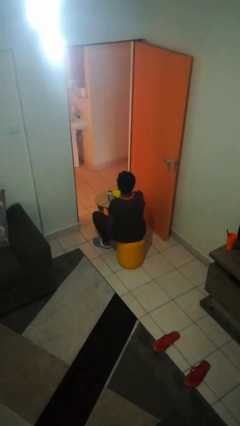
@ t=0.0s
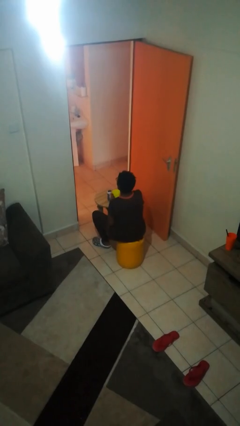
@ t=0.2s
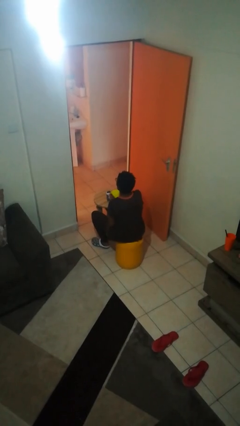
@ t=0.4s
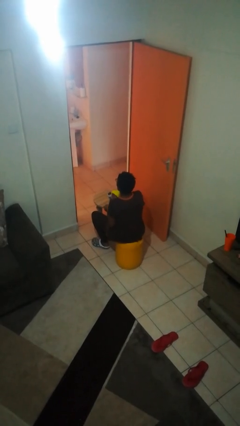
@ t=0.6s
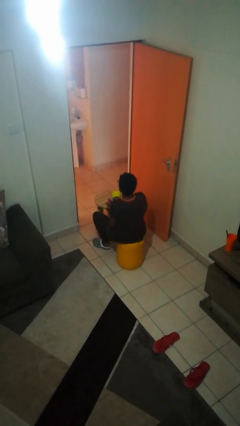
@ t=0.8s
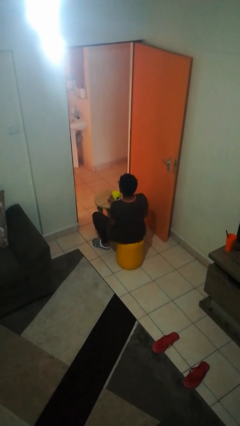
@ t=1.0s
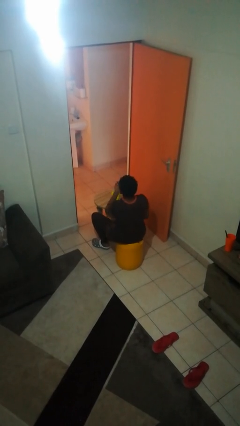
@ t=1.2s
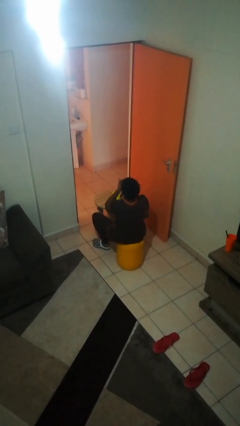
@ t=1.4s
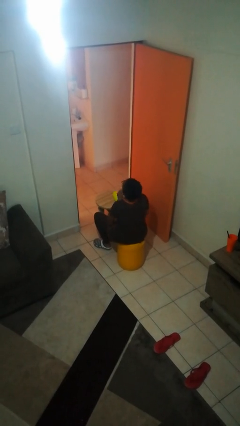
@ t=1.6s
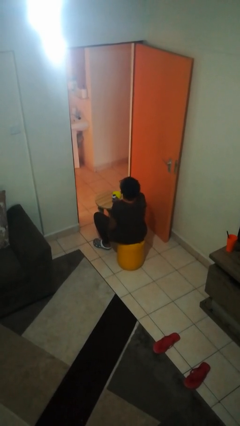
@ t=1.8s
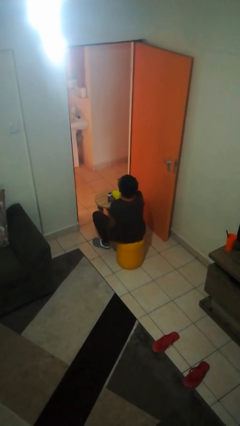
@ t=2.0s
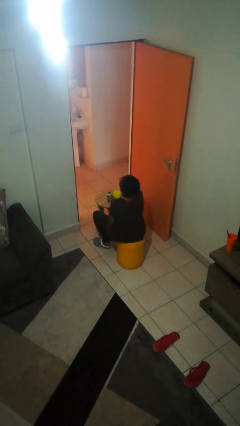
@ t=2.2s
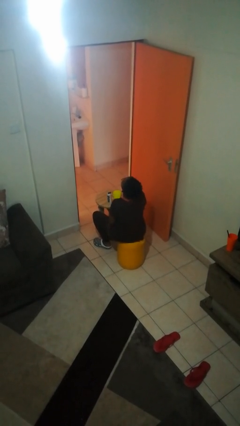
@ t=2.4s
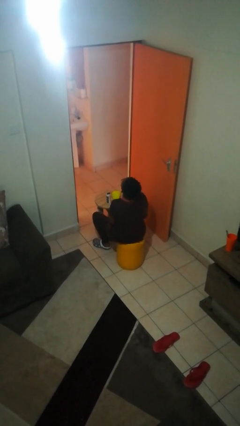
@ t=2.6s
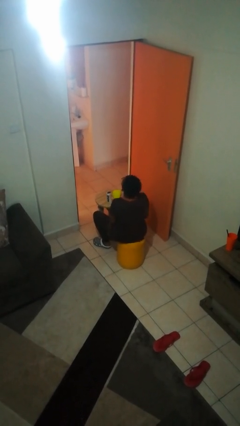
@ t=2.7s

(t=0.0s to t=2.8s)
person takes medicine pills

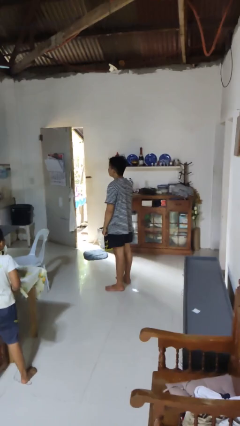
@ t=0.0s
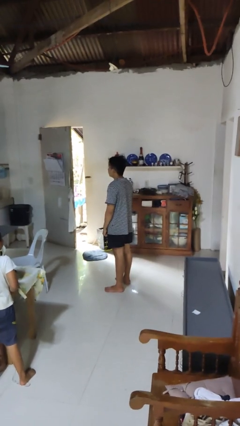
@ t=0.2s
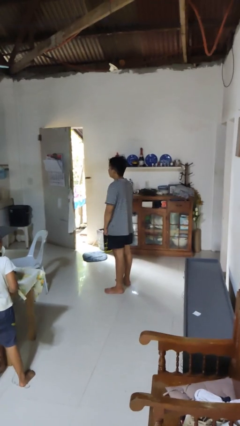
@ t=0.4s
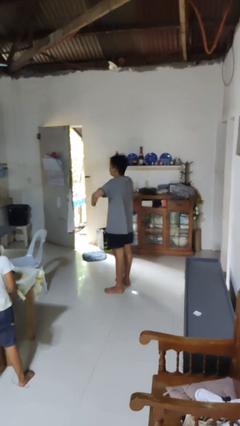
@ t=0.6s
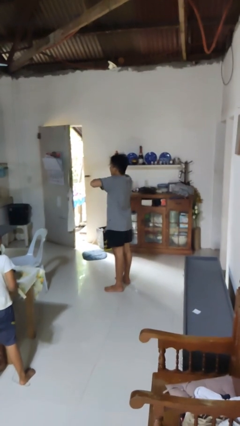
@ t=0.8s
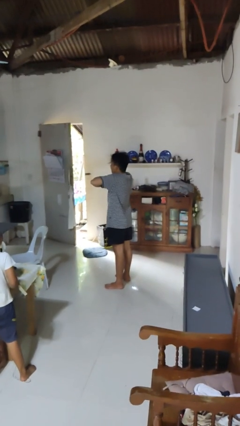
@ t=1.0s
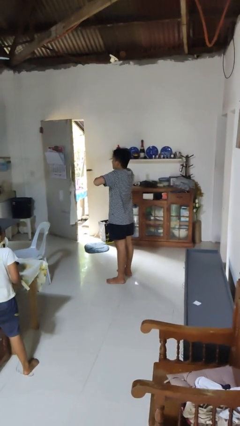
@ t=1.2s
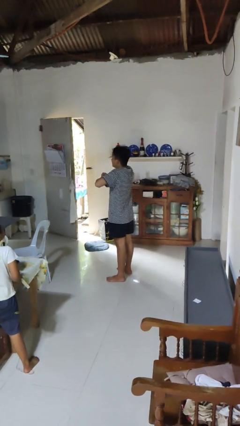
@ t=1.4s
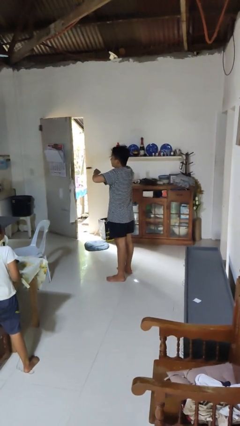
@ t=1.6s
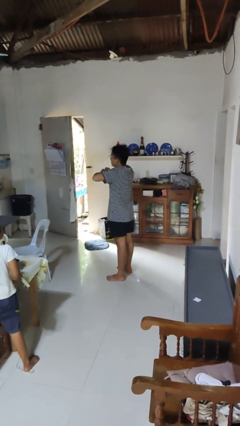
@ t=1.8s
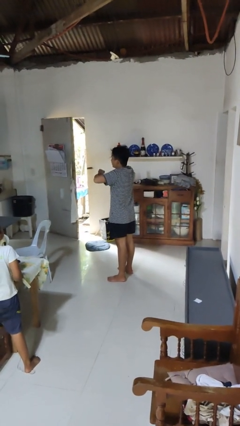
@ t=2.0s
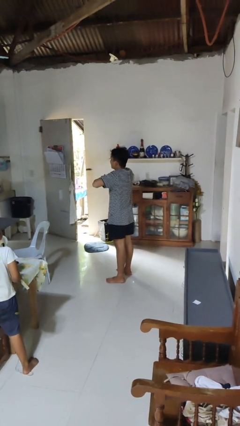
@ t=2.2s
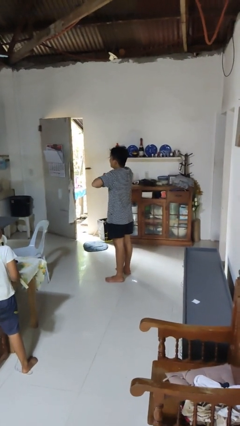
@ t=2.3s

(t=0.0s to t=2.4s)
person drums on chest

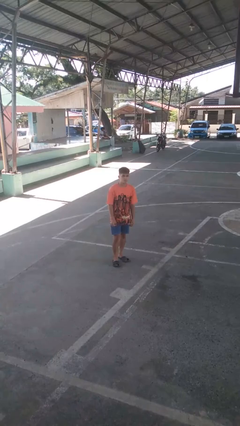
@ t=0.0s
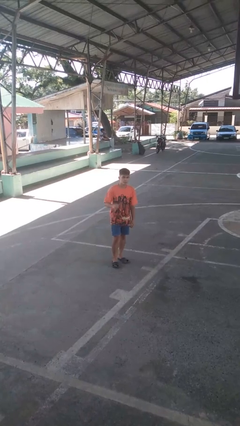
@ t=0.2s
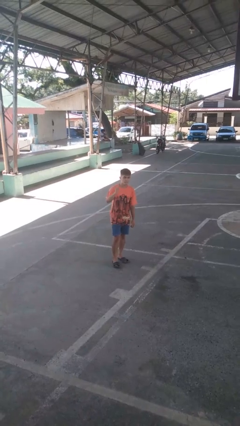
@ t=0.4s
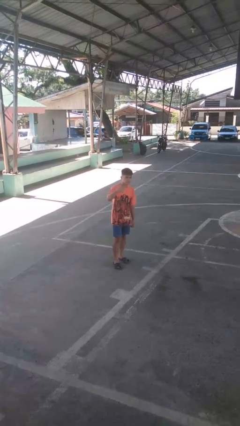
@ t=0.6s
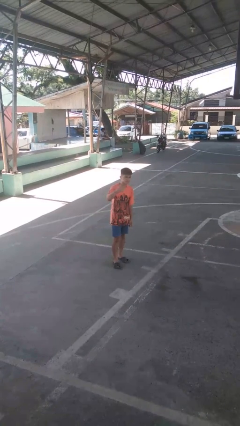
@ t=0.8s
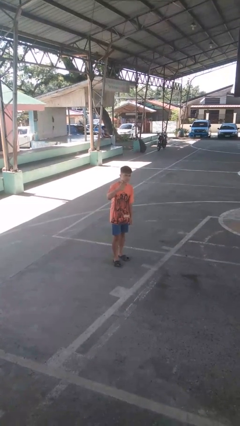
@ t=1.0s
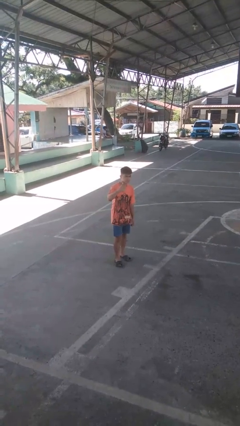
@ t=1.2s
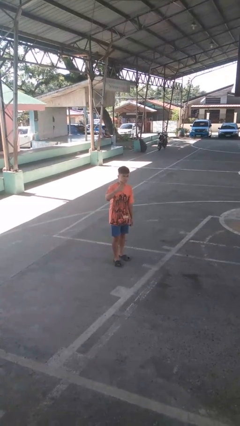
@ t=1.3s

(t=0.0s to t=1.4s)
person gestures thumbs up

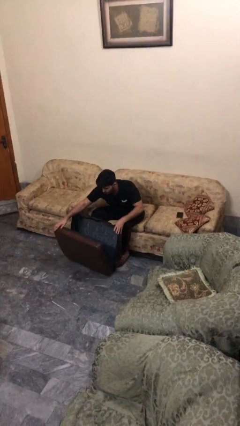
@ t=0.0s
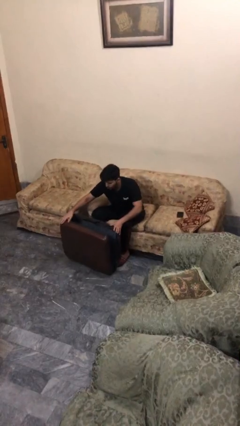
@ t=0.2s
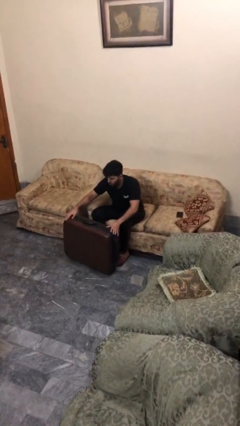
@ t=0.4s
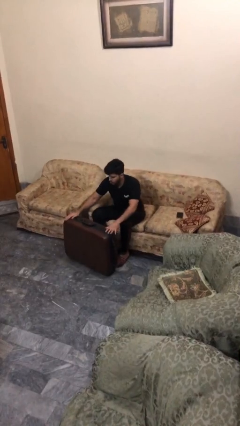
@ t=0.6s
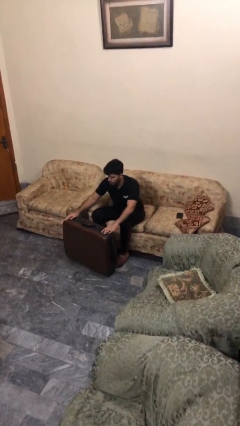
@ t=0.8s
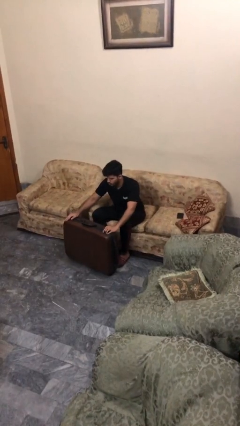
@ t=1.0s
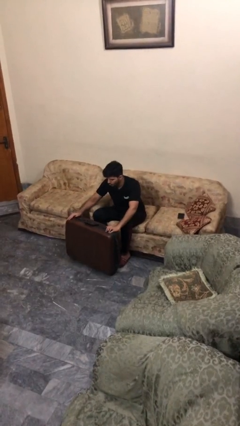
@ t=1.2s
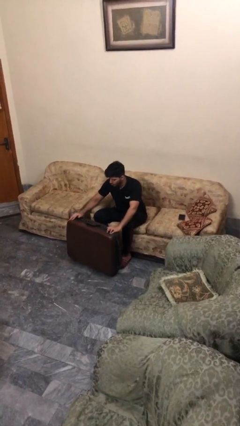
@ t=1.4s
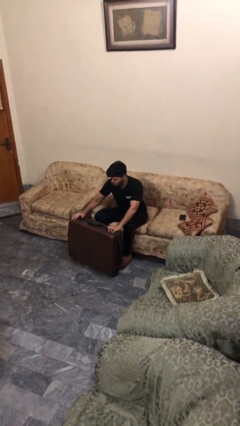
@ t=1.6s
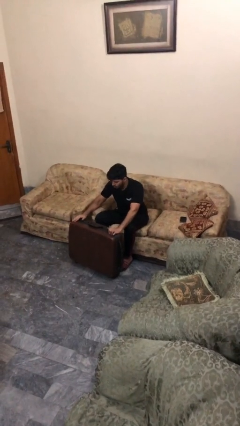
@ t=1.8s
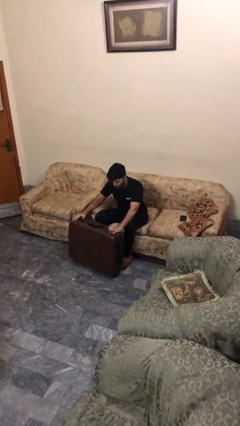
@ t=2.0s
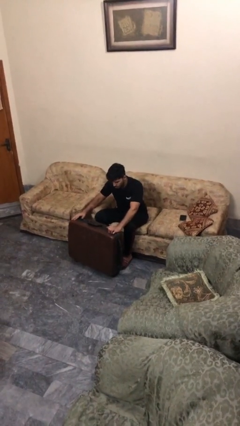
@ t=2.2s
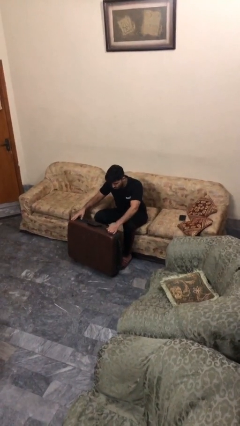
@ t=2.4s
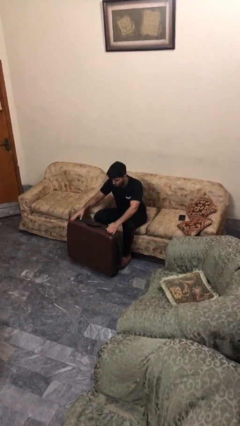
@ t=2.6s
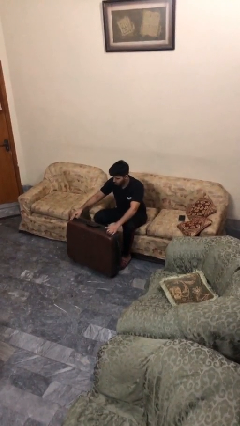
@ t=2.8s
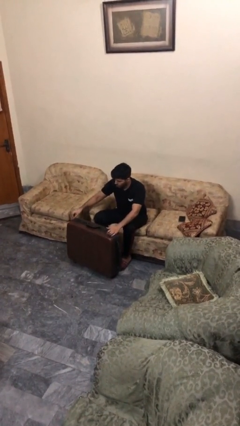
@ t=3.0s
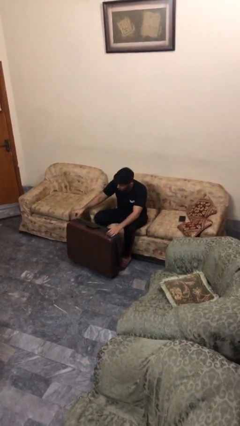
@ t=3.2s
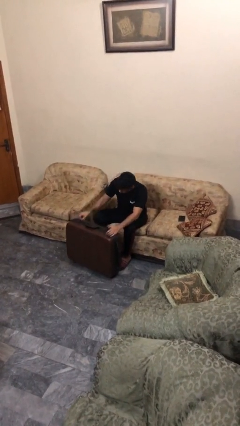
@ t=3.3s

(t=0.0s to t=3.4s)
person closes suitcase

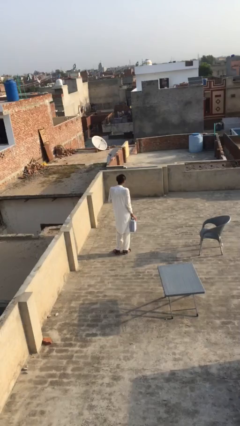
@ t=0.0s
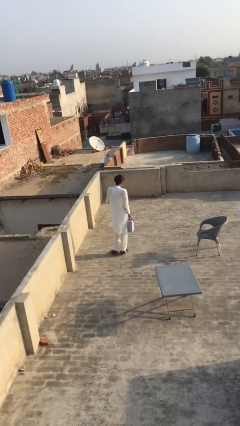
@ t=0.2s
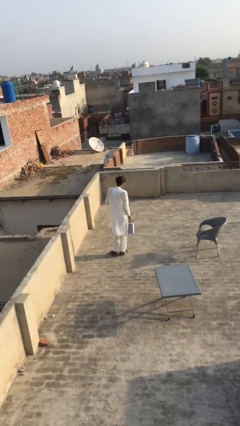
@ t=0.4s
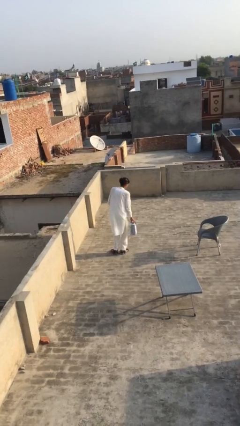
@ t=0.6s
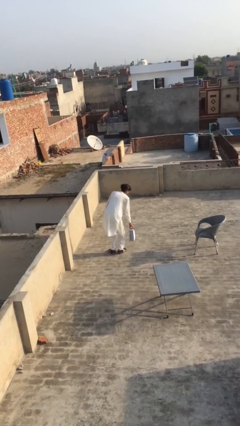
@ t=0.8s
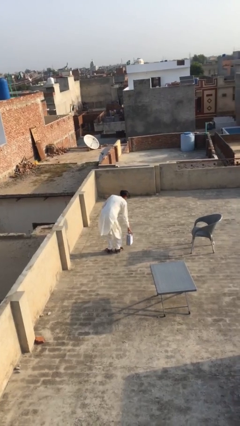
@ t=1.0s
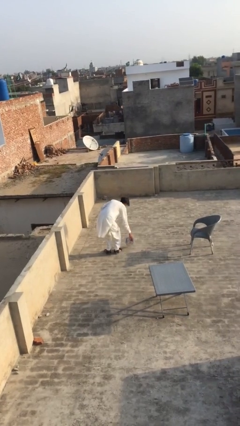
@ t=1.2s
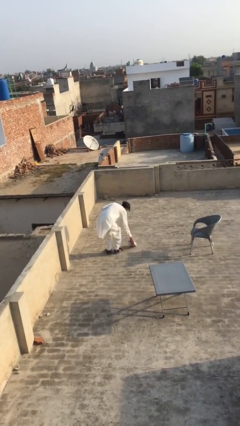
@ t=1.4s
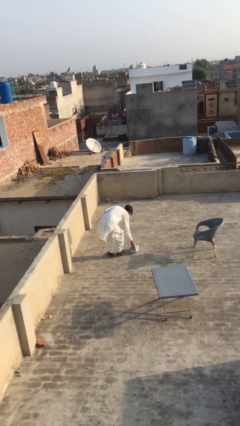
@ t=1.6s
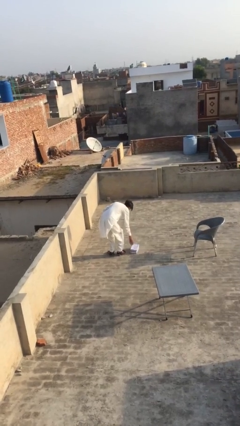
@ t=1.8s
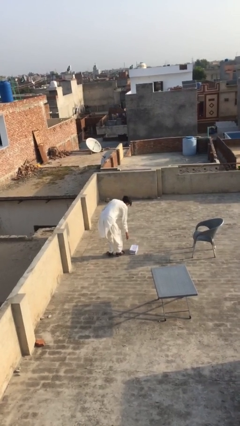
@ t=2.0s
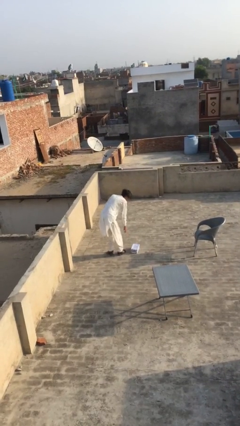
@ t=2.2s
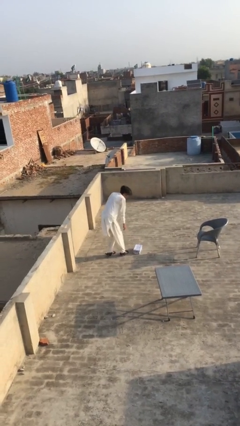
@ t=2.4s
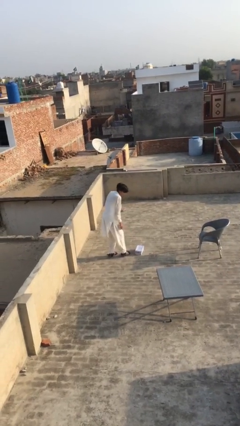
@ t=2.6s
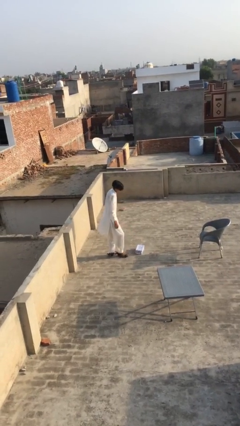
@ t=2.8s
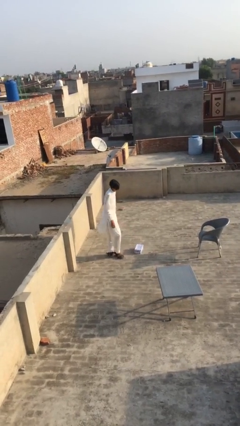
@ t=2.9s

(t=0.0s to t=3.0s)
person puts down object on floor

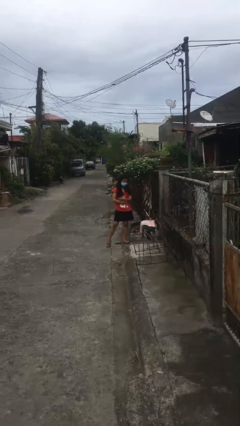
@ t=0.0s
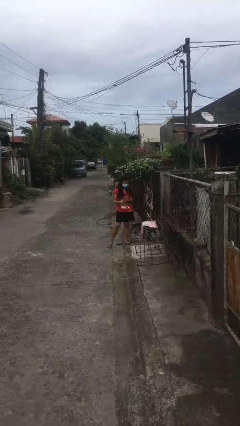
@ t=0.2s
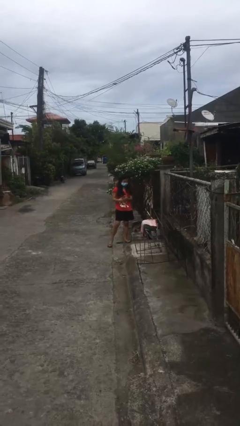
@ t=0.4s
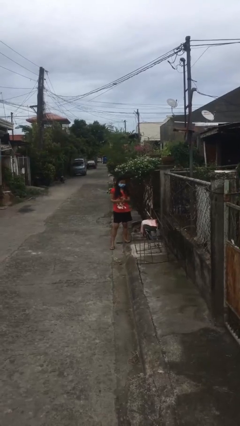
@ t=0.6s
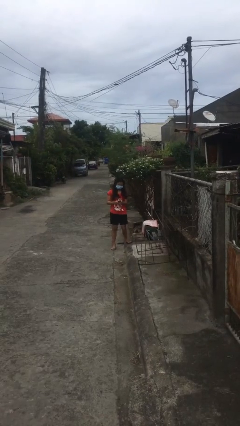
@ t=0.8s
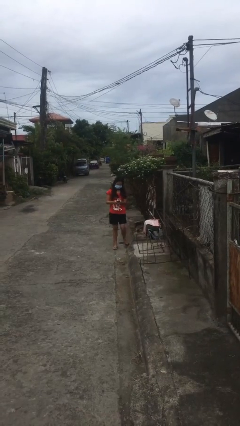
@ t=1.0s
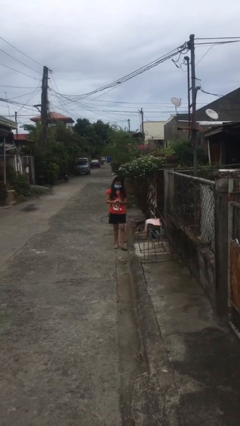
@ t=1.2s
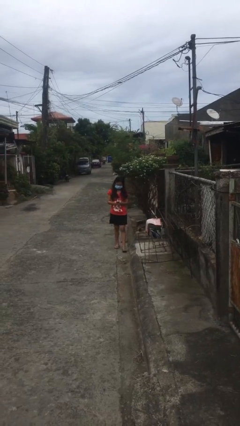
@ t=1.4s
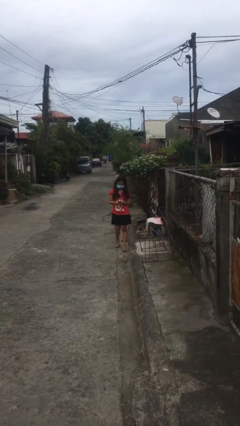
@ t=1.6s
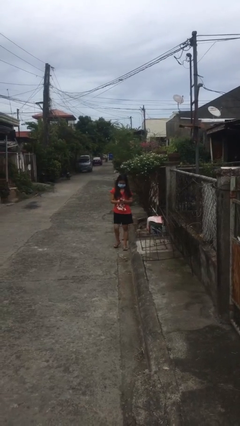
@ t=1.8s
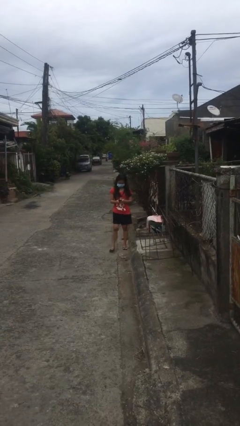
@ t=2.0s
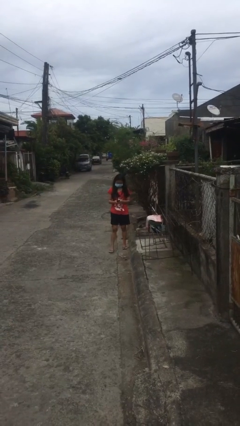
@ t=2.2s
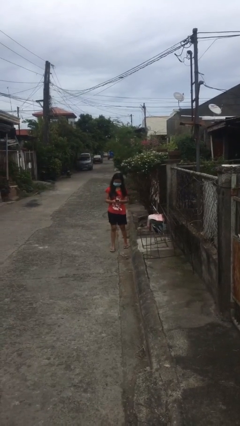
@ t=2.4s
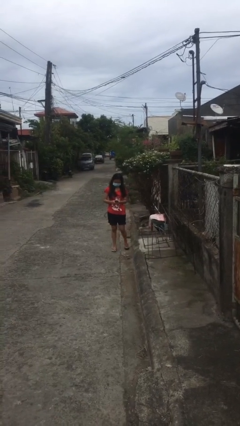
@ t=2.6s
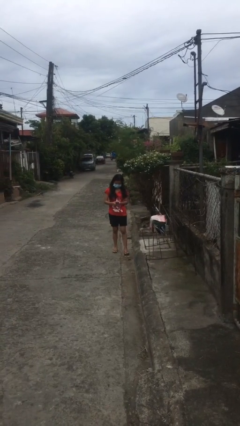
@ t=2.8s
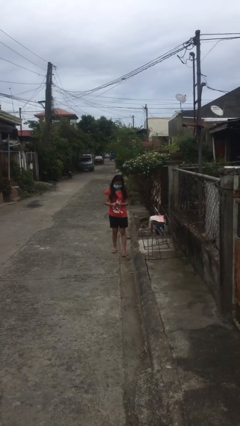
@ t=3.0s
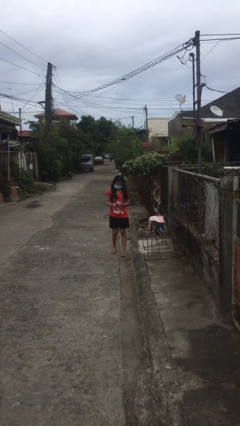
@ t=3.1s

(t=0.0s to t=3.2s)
person texts on phone

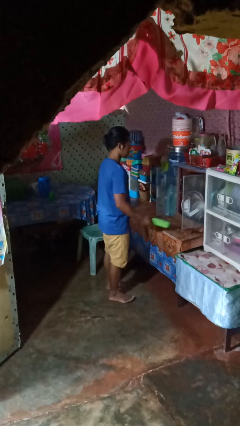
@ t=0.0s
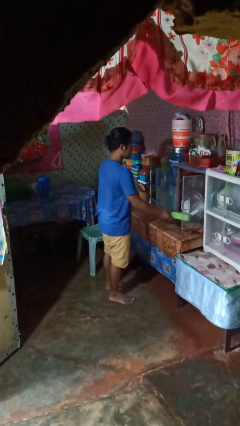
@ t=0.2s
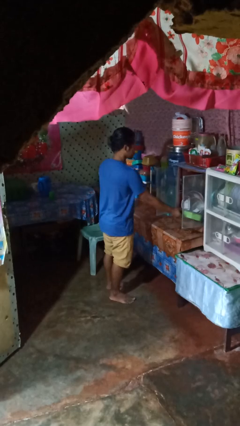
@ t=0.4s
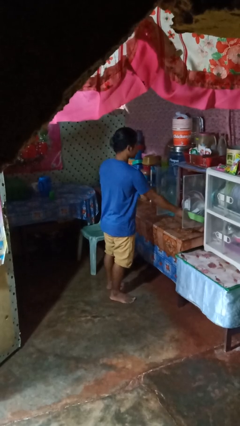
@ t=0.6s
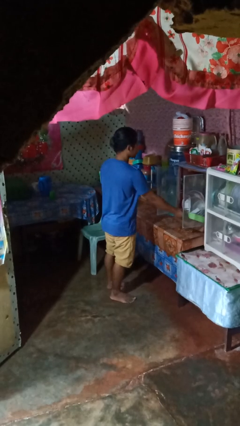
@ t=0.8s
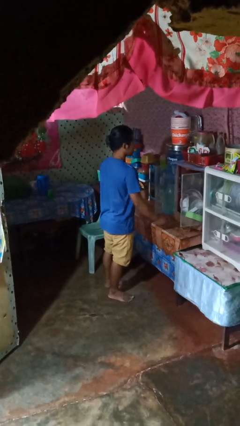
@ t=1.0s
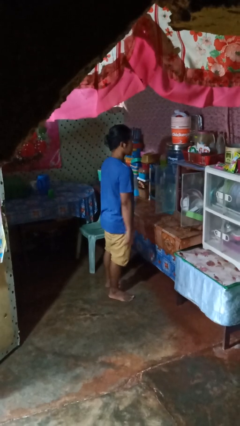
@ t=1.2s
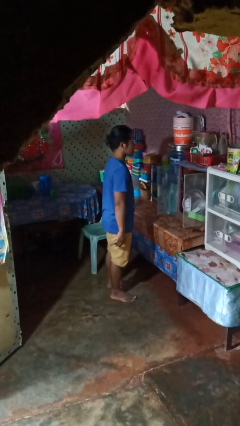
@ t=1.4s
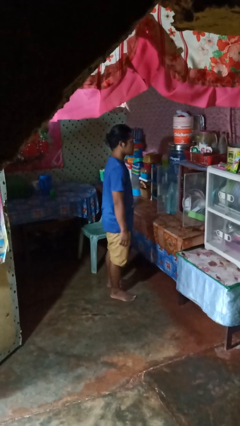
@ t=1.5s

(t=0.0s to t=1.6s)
person puts down object into cabinet
